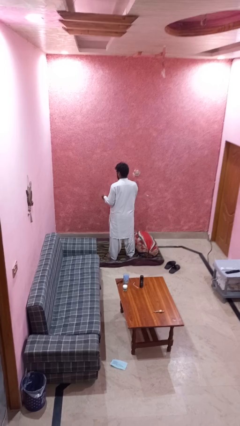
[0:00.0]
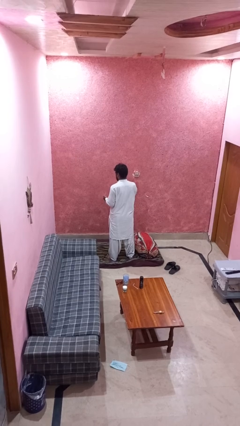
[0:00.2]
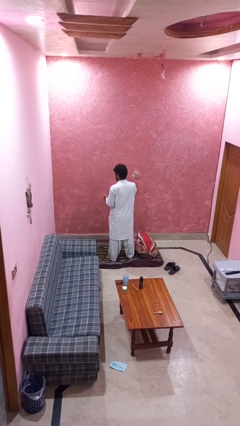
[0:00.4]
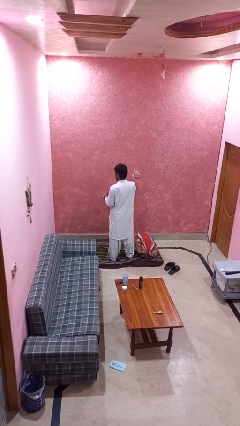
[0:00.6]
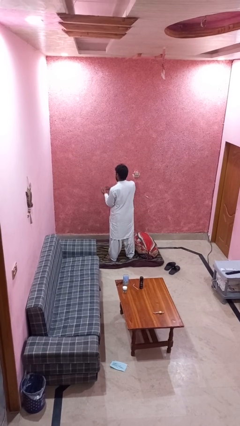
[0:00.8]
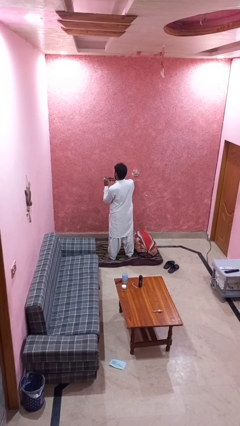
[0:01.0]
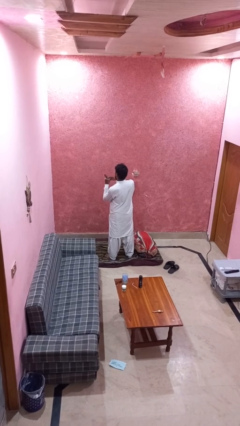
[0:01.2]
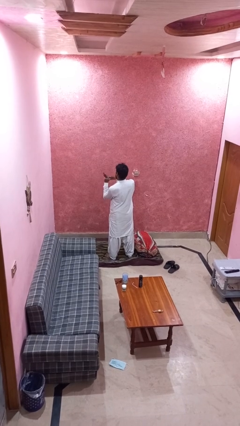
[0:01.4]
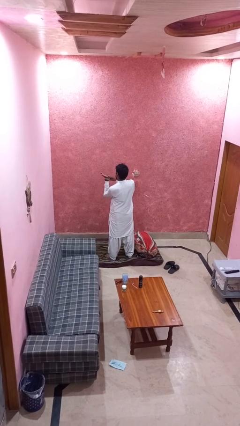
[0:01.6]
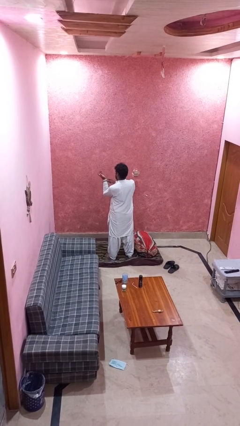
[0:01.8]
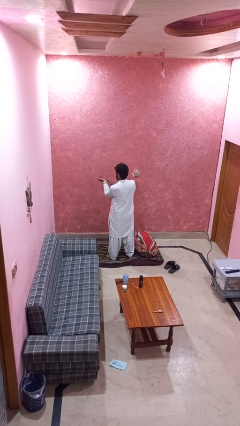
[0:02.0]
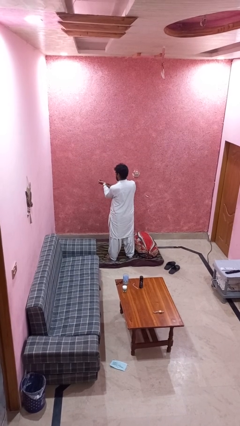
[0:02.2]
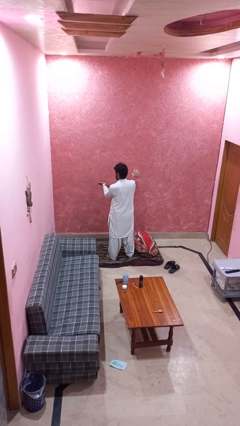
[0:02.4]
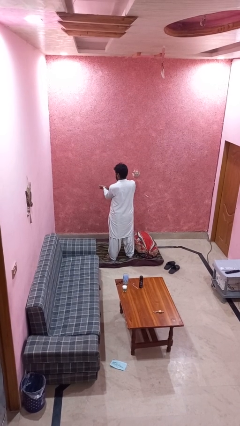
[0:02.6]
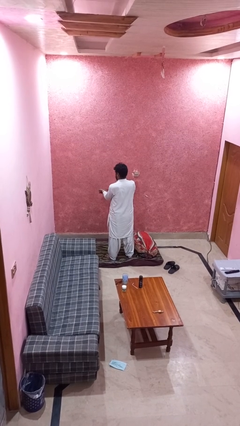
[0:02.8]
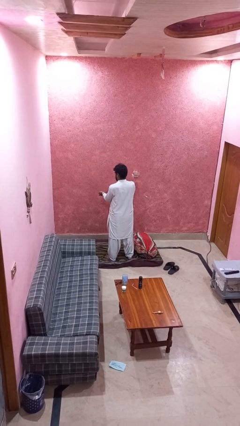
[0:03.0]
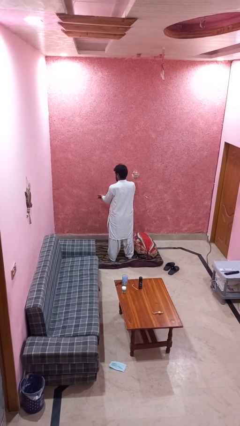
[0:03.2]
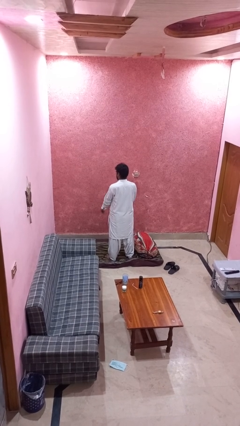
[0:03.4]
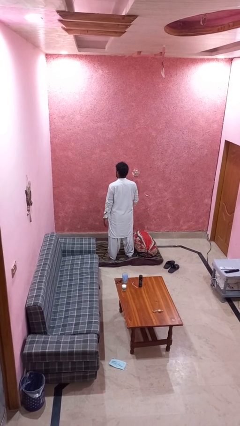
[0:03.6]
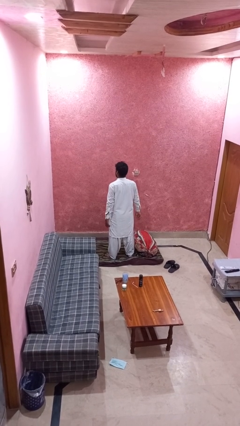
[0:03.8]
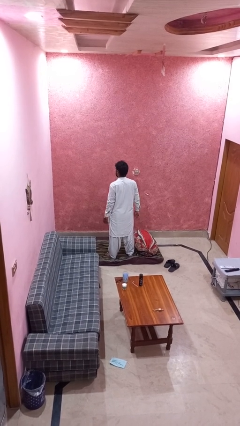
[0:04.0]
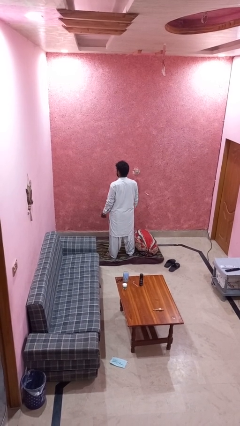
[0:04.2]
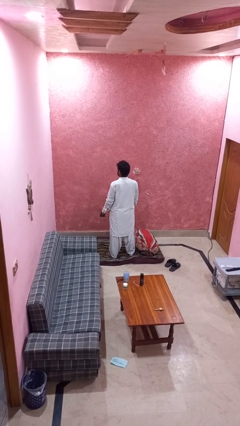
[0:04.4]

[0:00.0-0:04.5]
person puts on wristwatch

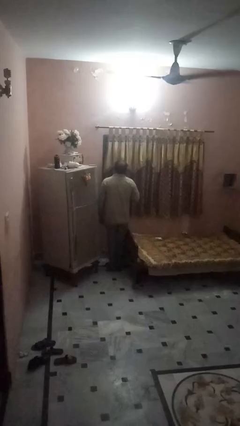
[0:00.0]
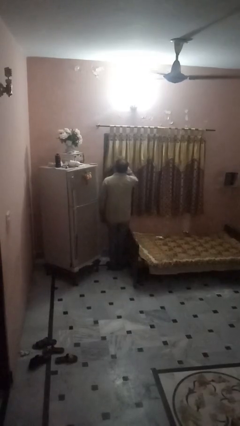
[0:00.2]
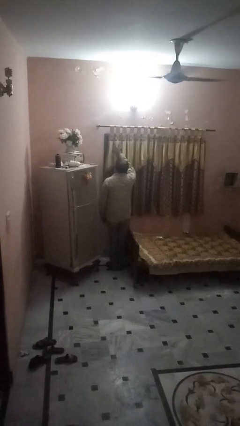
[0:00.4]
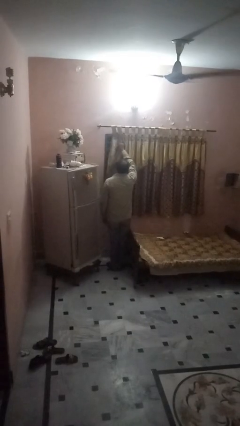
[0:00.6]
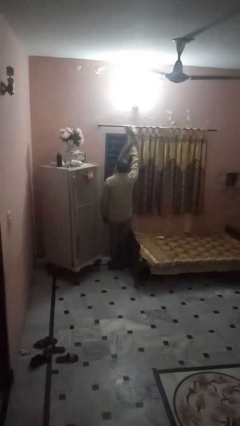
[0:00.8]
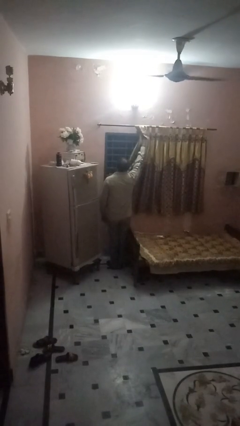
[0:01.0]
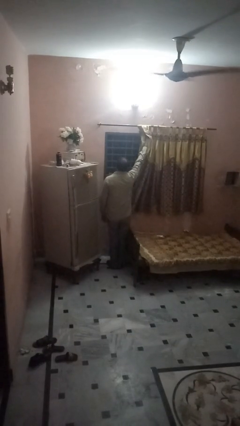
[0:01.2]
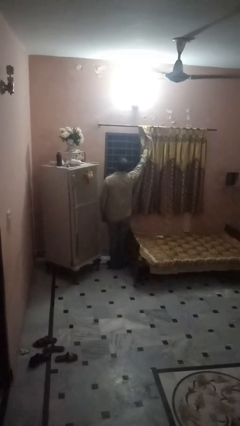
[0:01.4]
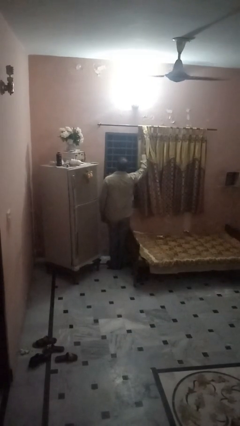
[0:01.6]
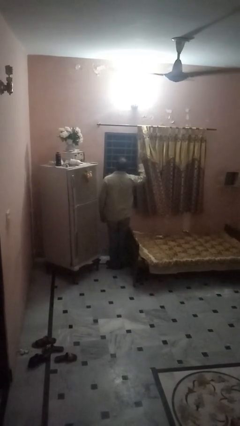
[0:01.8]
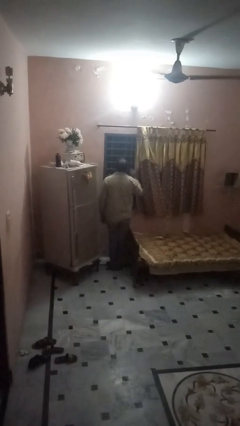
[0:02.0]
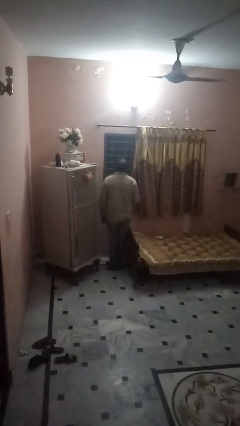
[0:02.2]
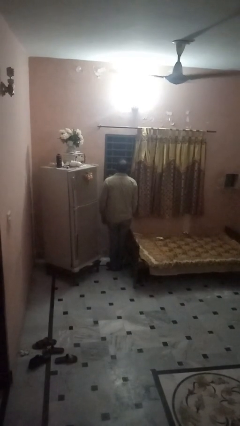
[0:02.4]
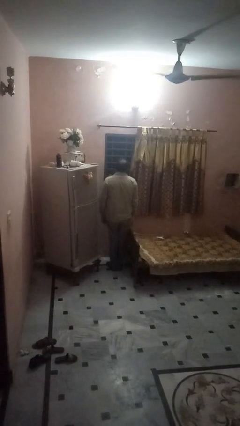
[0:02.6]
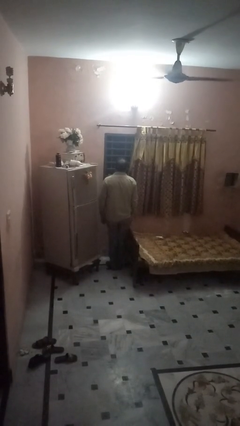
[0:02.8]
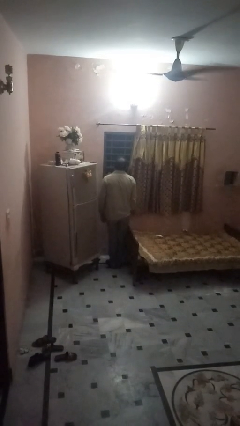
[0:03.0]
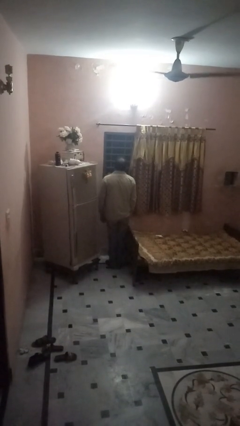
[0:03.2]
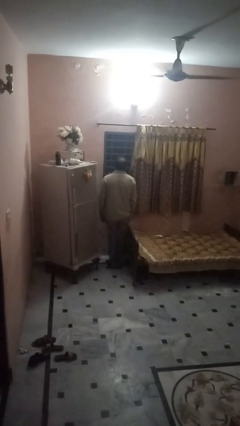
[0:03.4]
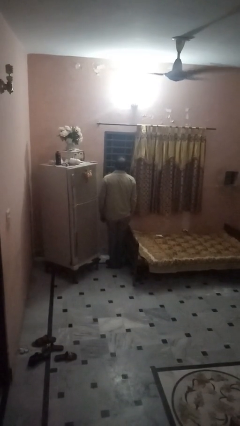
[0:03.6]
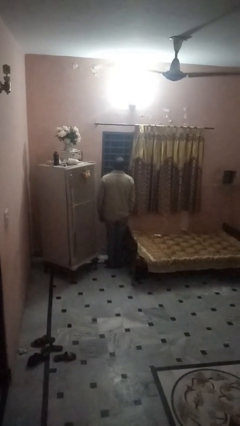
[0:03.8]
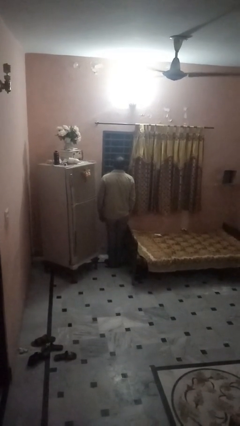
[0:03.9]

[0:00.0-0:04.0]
person opens curtains

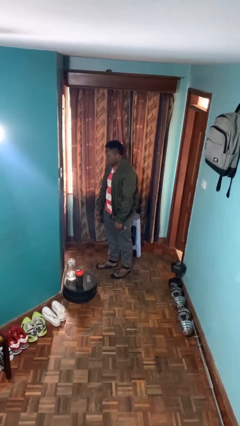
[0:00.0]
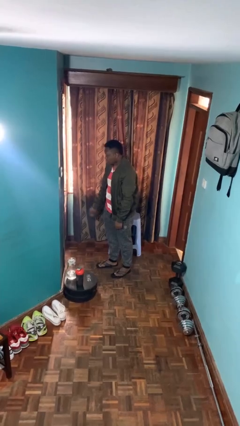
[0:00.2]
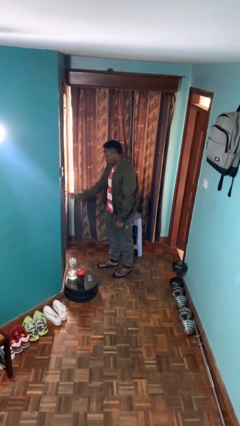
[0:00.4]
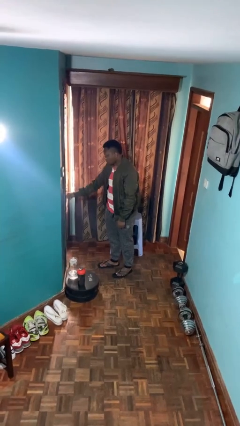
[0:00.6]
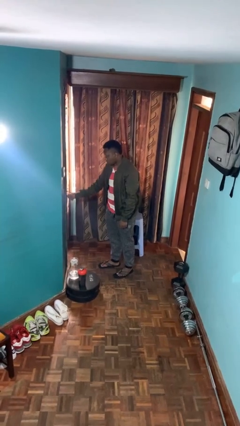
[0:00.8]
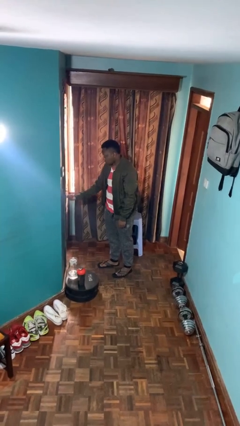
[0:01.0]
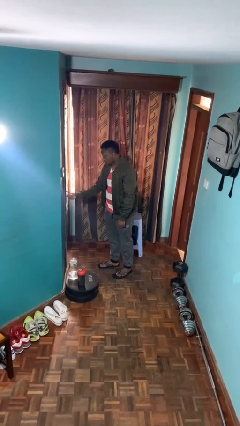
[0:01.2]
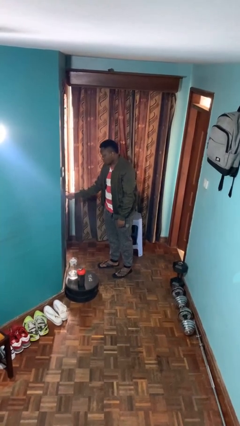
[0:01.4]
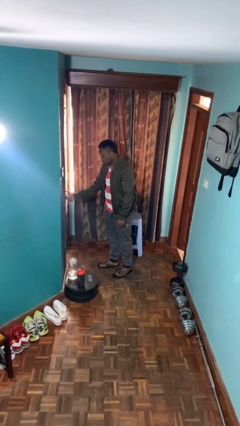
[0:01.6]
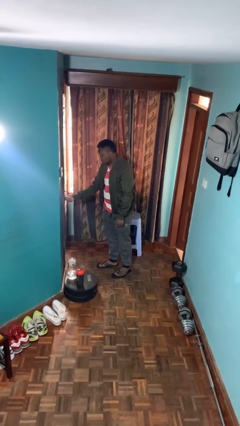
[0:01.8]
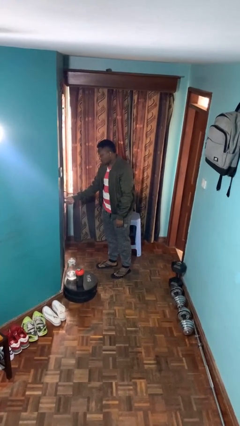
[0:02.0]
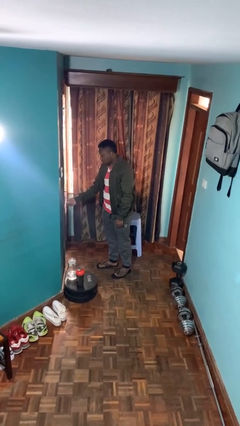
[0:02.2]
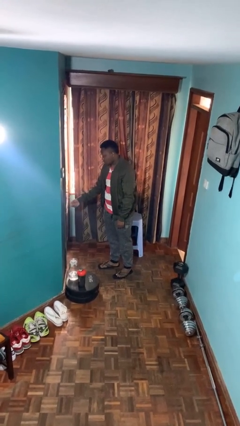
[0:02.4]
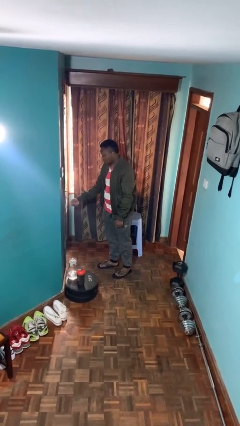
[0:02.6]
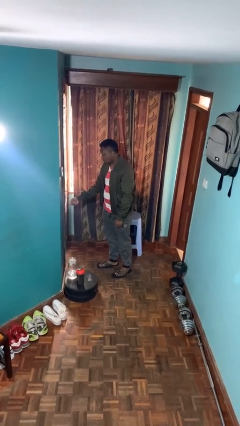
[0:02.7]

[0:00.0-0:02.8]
person unlocks door with keys

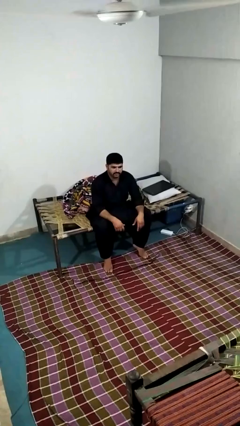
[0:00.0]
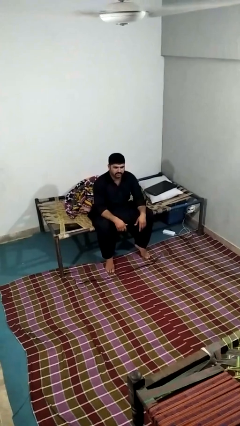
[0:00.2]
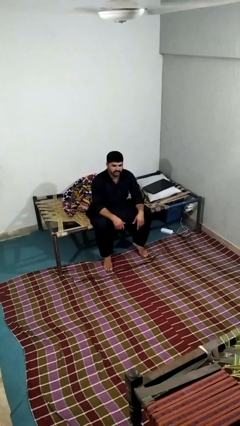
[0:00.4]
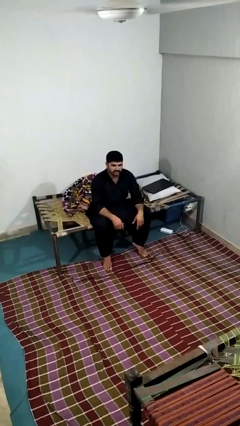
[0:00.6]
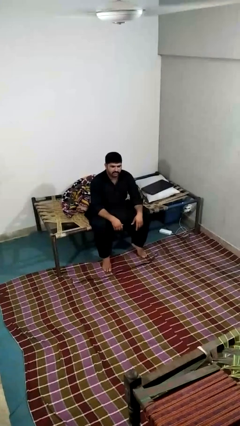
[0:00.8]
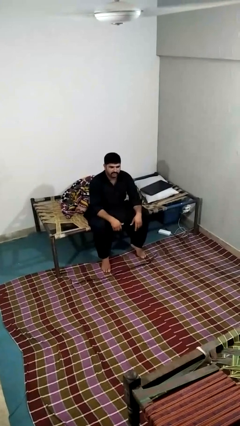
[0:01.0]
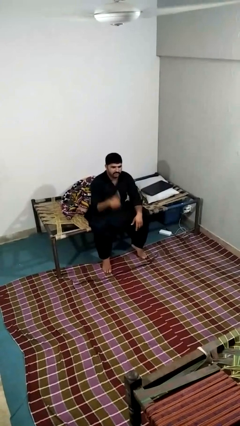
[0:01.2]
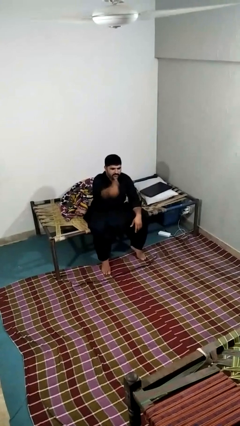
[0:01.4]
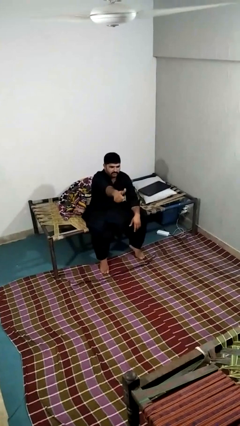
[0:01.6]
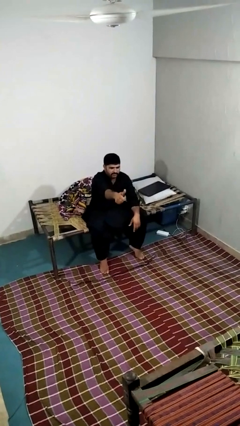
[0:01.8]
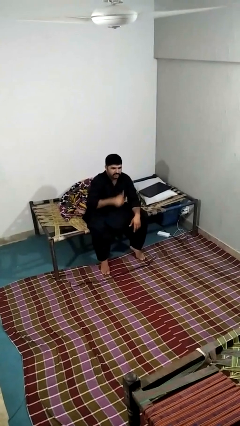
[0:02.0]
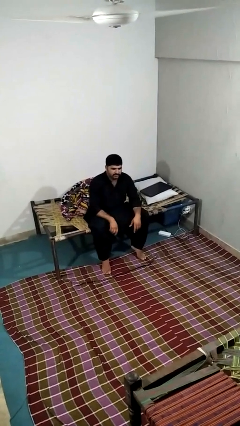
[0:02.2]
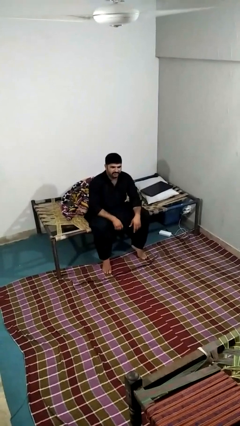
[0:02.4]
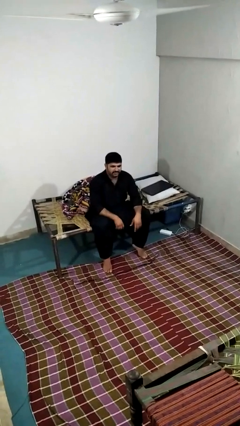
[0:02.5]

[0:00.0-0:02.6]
person gestures thumbs up

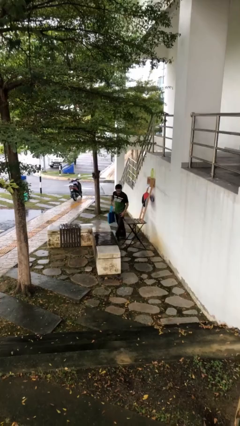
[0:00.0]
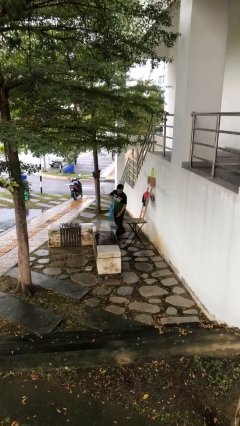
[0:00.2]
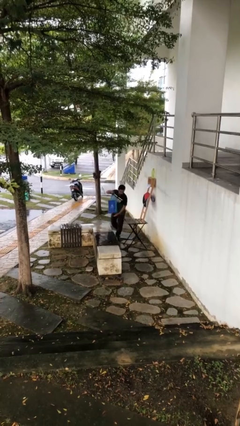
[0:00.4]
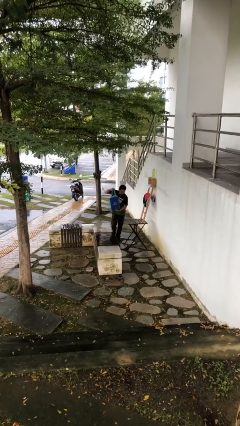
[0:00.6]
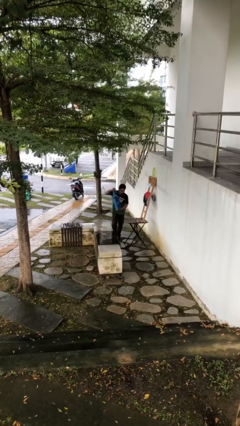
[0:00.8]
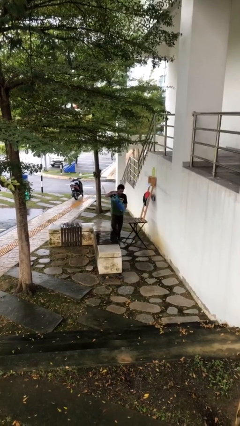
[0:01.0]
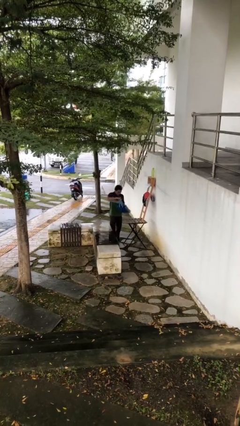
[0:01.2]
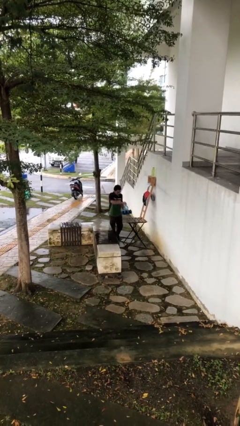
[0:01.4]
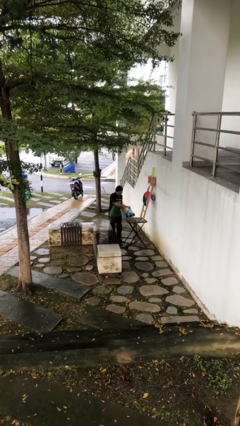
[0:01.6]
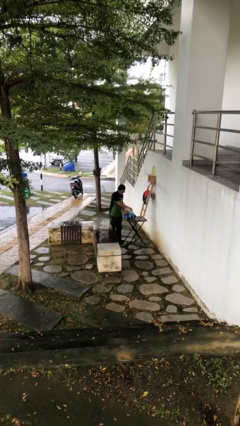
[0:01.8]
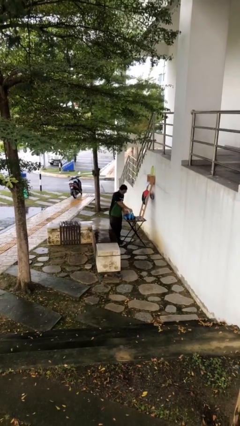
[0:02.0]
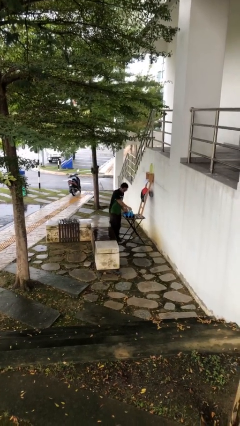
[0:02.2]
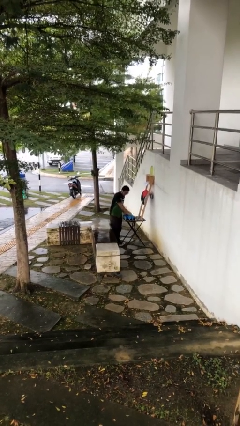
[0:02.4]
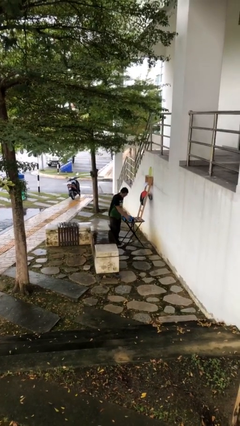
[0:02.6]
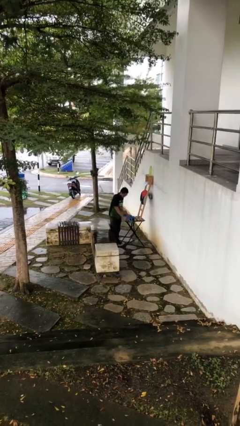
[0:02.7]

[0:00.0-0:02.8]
person puts down object on table

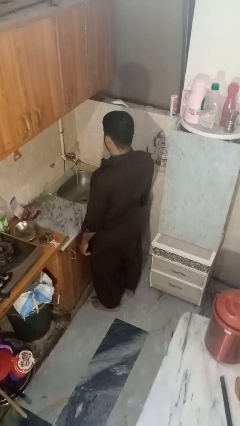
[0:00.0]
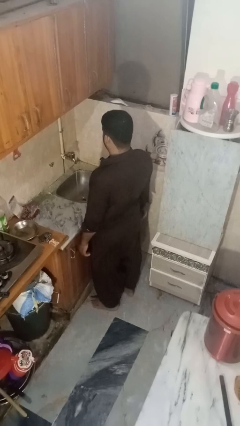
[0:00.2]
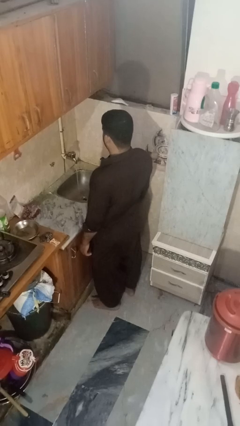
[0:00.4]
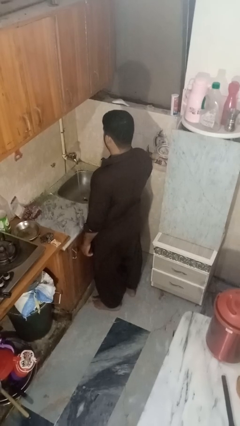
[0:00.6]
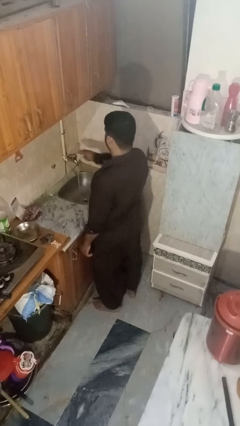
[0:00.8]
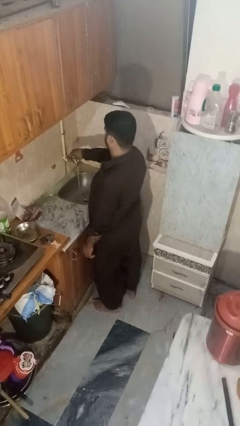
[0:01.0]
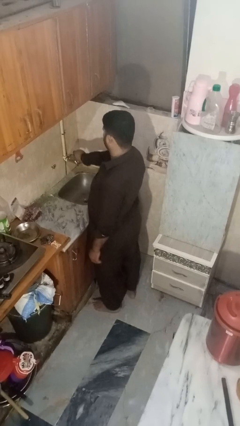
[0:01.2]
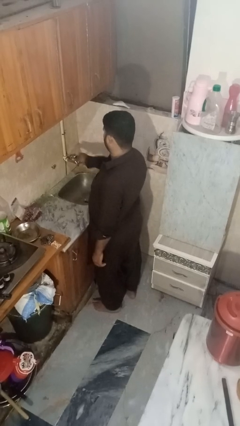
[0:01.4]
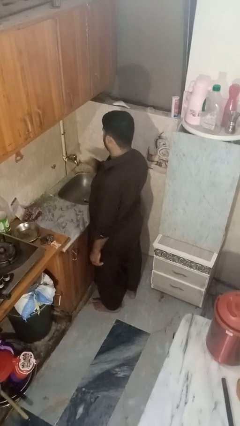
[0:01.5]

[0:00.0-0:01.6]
person turns off faucet
